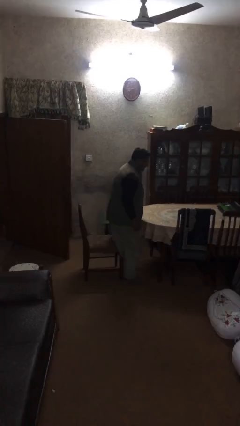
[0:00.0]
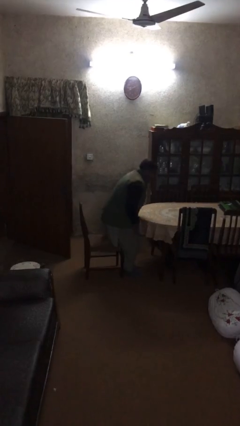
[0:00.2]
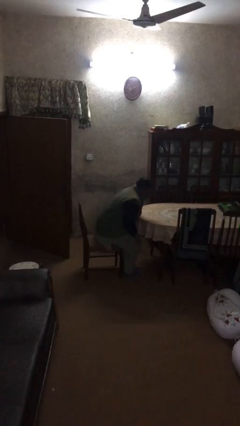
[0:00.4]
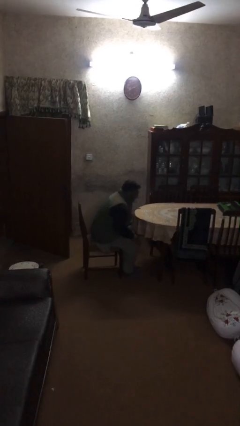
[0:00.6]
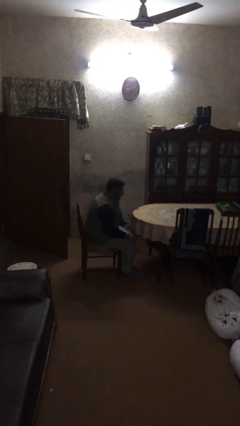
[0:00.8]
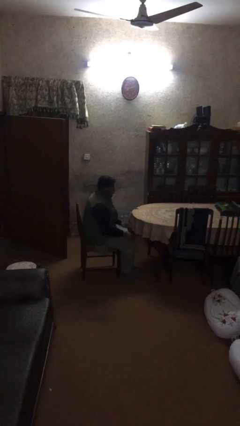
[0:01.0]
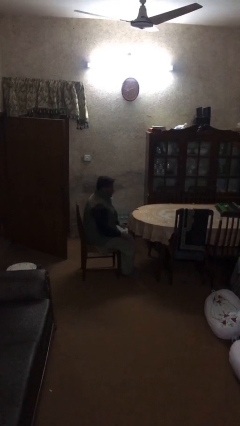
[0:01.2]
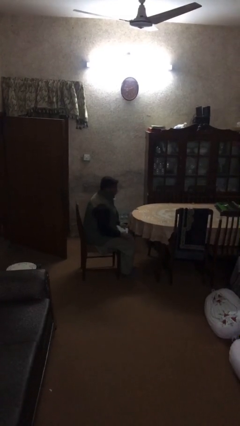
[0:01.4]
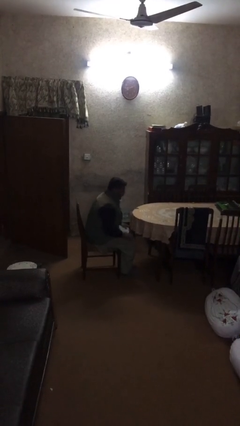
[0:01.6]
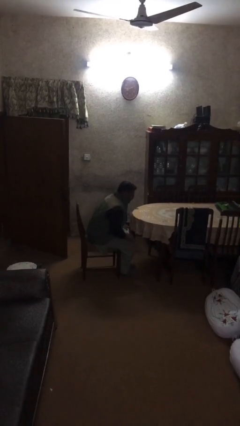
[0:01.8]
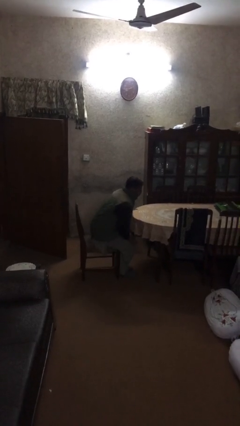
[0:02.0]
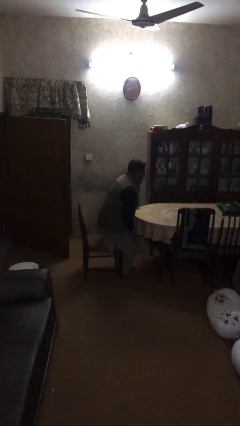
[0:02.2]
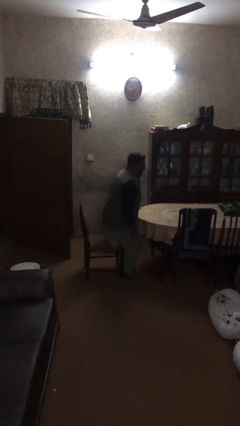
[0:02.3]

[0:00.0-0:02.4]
person sits down

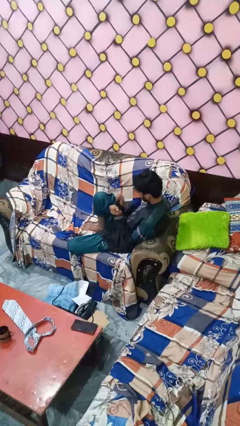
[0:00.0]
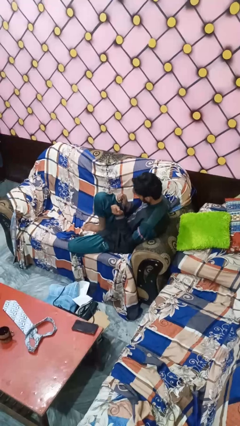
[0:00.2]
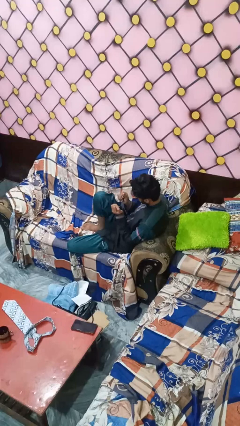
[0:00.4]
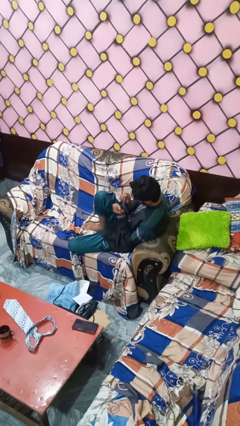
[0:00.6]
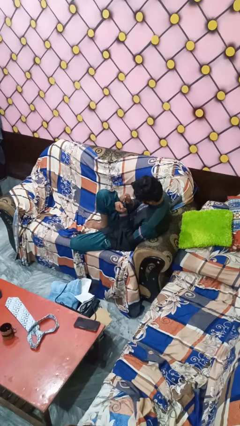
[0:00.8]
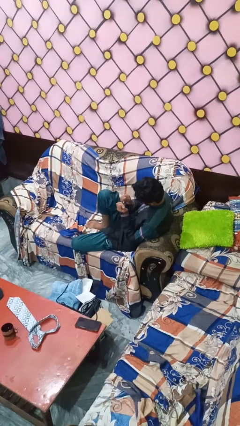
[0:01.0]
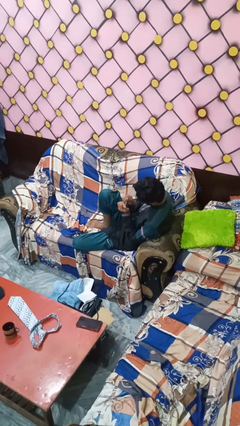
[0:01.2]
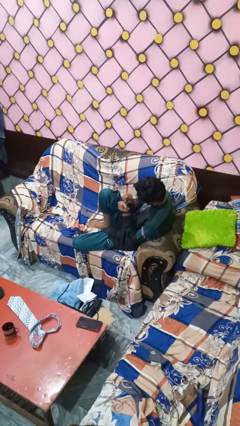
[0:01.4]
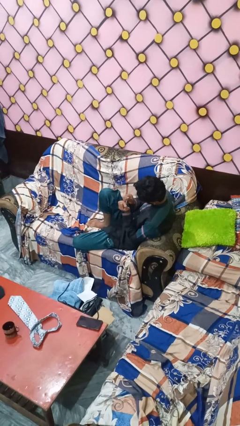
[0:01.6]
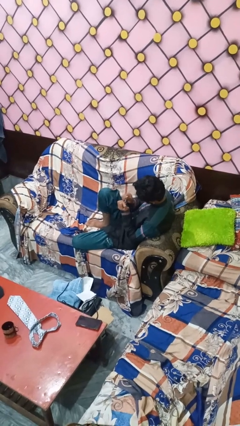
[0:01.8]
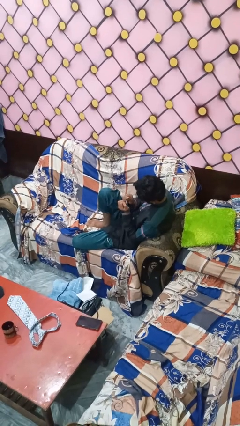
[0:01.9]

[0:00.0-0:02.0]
person paints fingernails

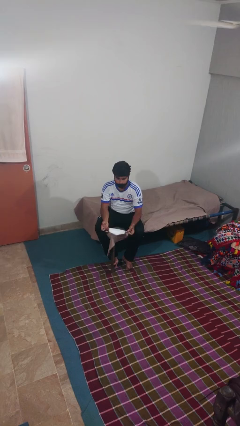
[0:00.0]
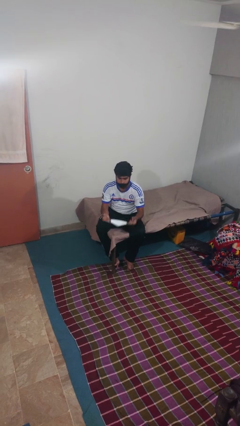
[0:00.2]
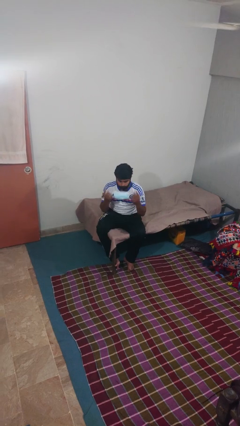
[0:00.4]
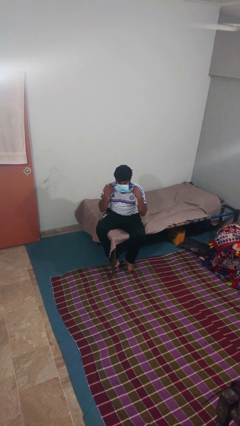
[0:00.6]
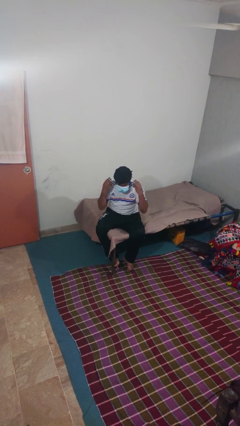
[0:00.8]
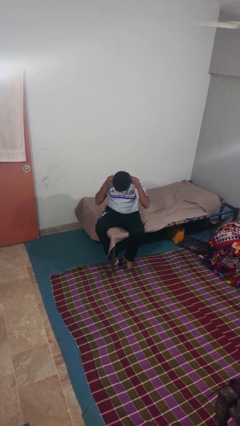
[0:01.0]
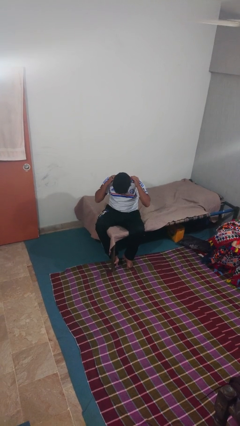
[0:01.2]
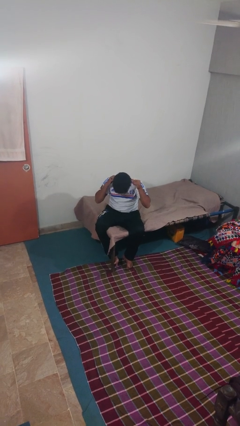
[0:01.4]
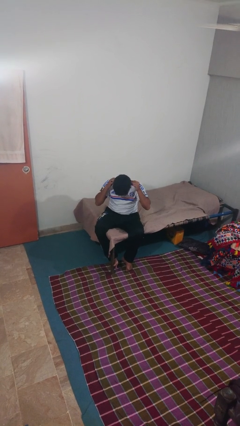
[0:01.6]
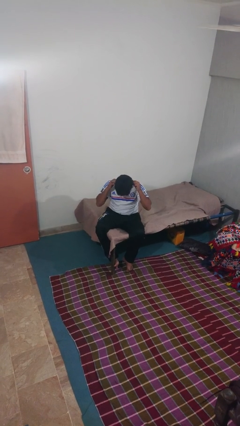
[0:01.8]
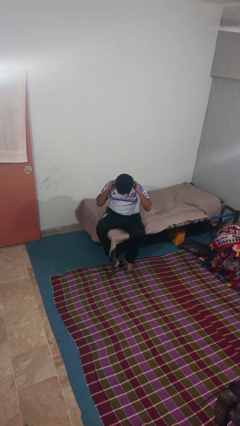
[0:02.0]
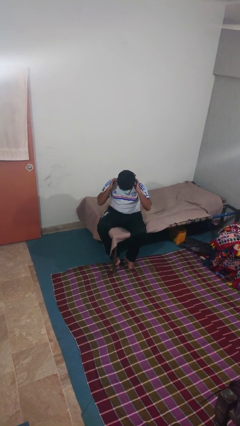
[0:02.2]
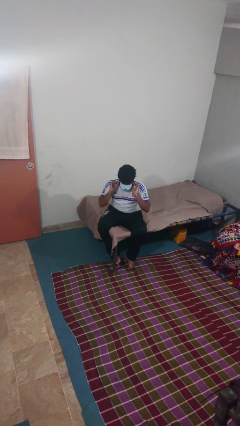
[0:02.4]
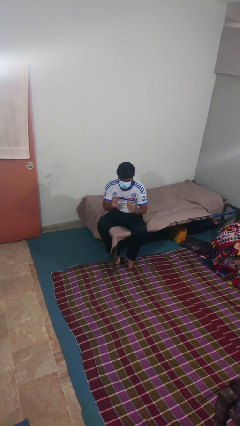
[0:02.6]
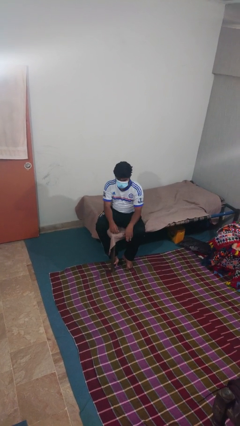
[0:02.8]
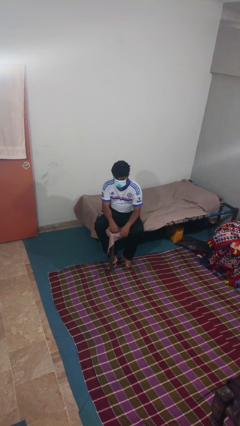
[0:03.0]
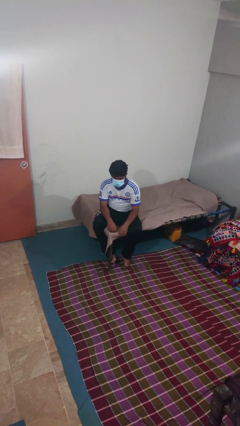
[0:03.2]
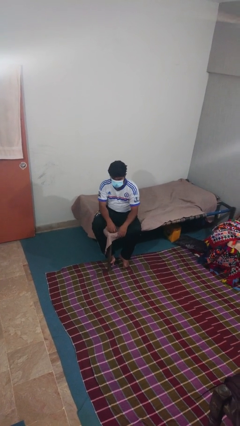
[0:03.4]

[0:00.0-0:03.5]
person puts on facemask

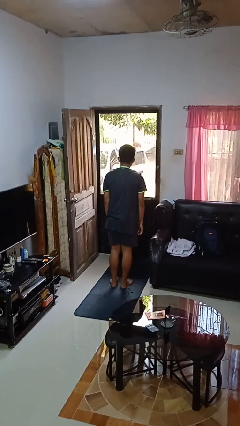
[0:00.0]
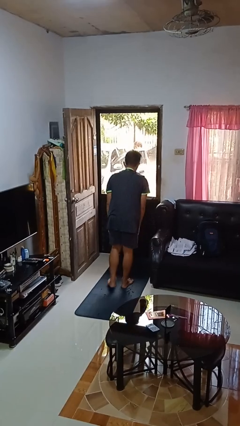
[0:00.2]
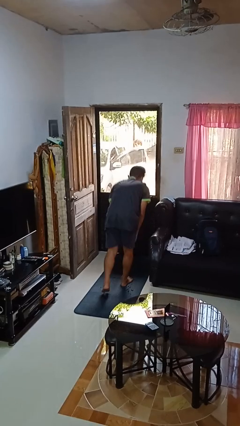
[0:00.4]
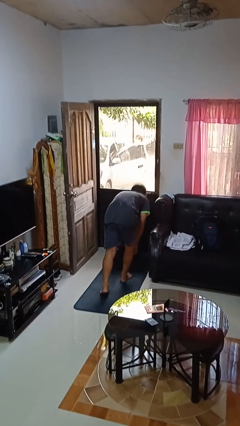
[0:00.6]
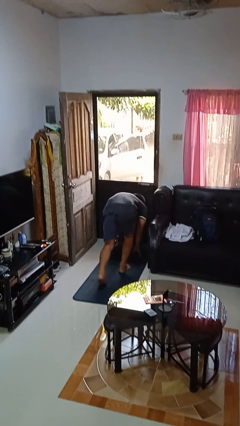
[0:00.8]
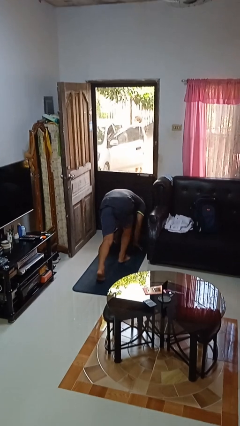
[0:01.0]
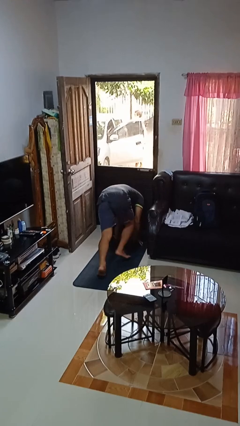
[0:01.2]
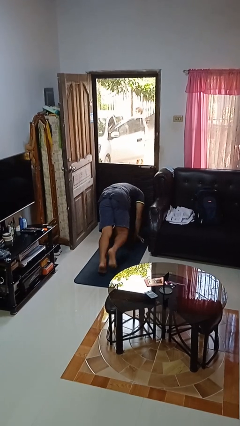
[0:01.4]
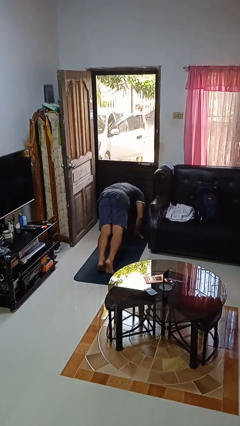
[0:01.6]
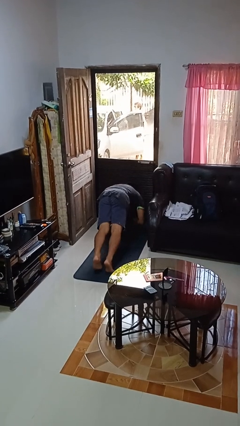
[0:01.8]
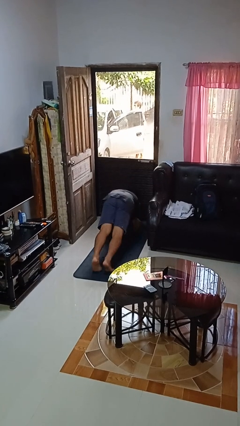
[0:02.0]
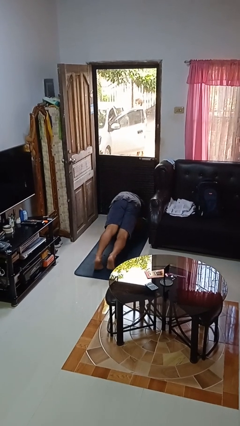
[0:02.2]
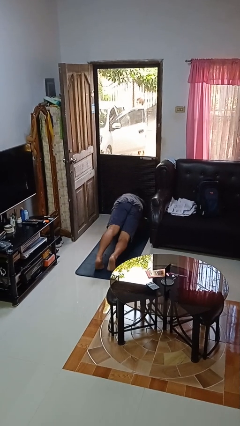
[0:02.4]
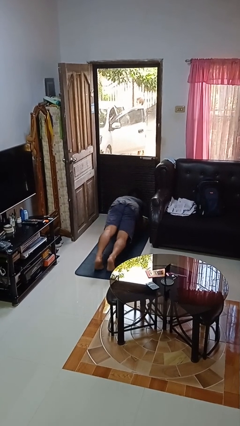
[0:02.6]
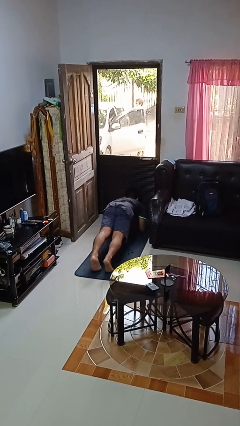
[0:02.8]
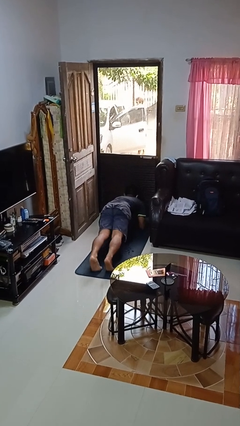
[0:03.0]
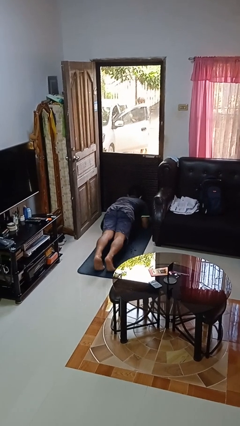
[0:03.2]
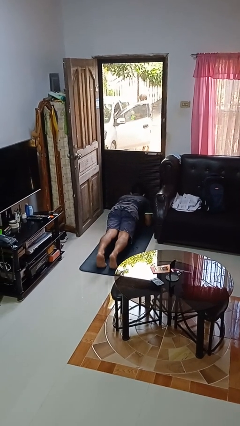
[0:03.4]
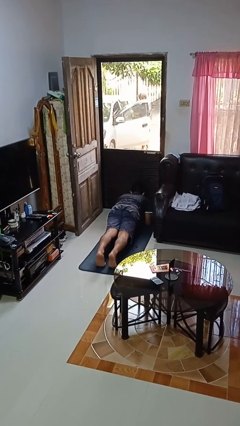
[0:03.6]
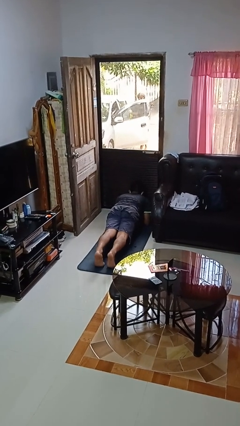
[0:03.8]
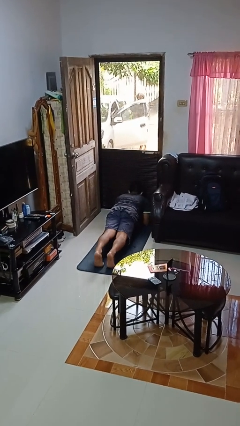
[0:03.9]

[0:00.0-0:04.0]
person exercises with plank

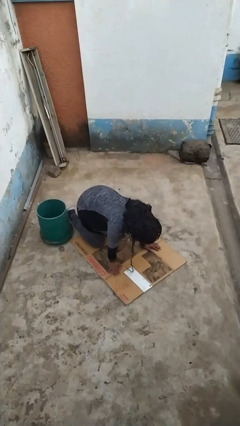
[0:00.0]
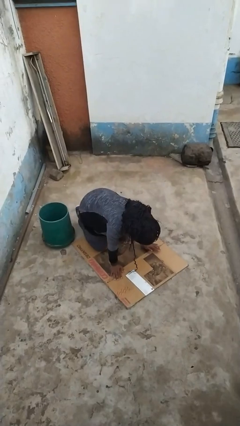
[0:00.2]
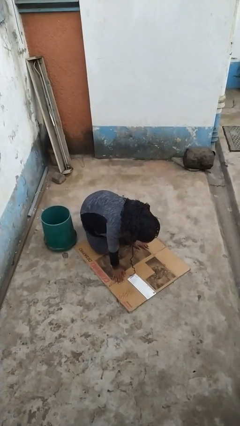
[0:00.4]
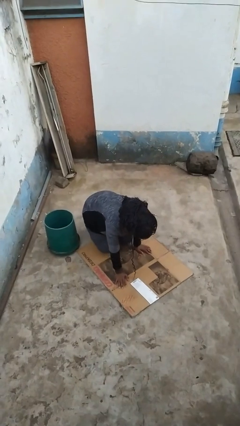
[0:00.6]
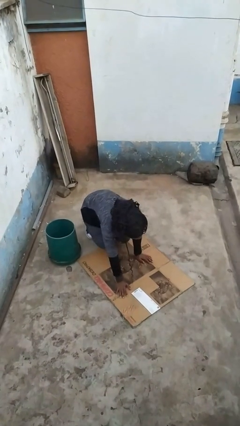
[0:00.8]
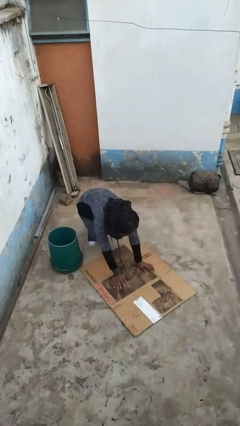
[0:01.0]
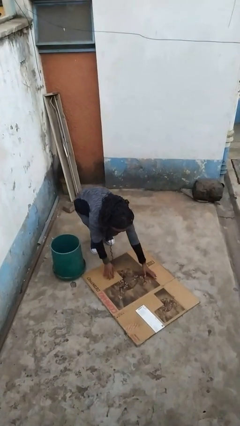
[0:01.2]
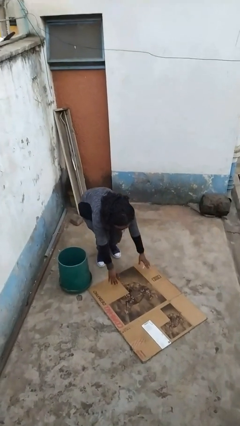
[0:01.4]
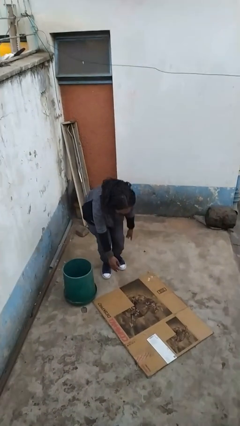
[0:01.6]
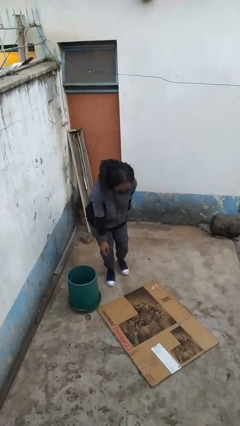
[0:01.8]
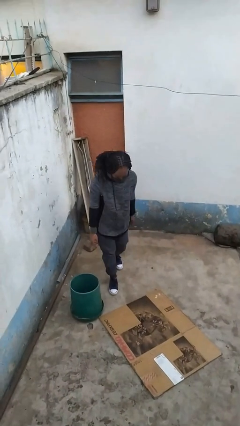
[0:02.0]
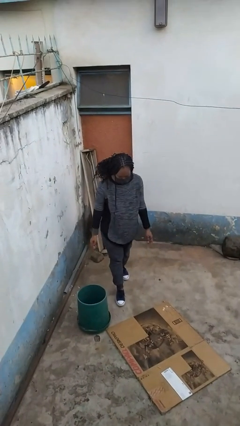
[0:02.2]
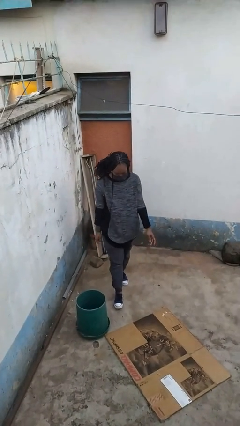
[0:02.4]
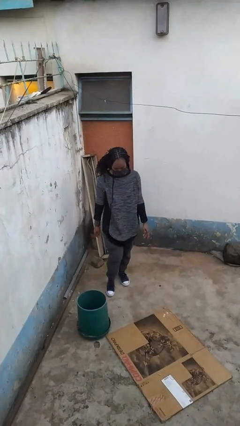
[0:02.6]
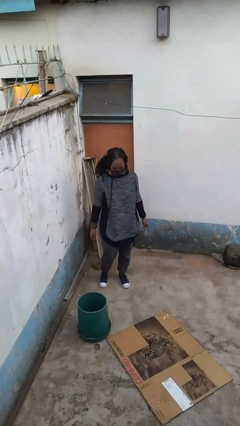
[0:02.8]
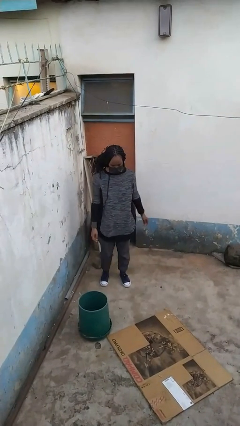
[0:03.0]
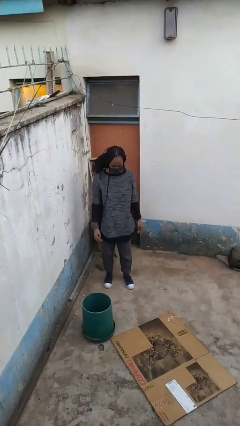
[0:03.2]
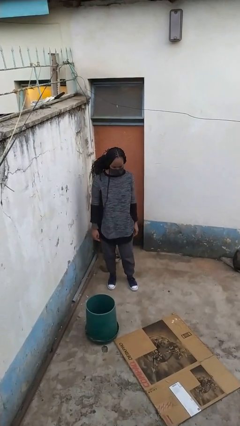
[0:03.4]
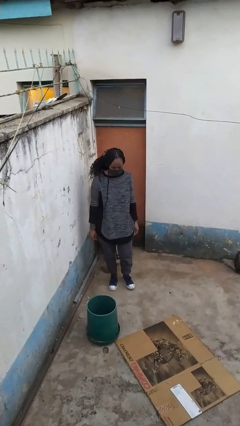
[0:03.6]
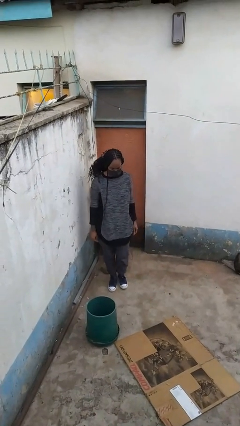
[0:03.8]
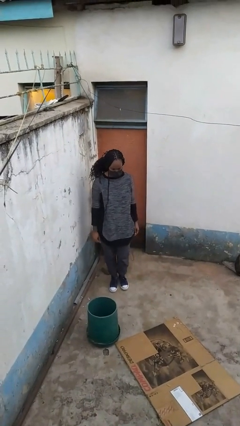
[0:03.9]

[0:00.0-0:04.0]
person stands up from floor

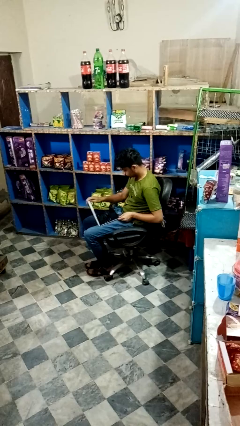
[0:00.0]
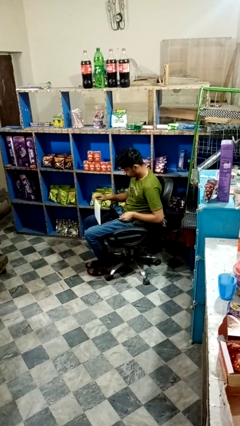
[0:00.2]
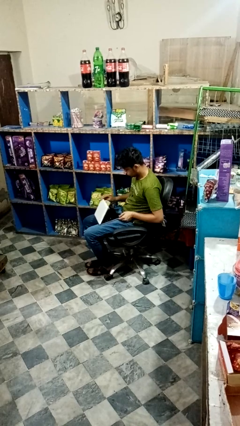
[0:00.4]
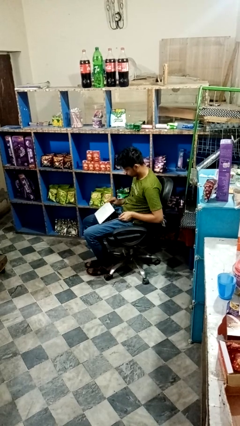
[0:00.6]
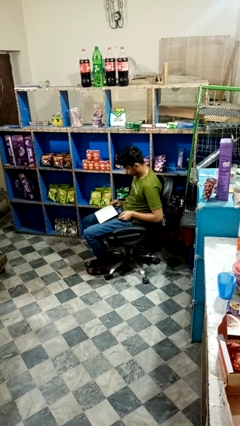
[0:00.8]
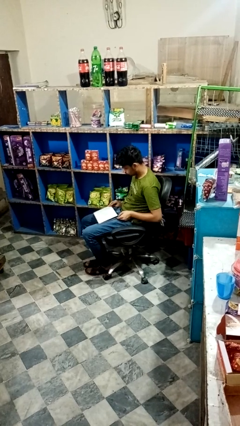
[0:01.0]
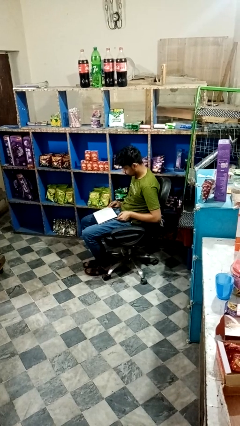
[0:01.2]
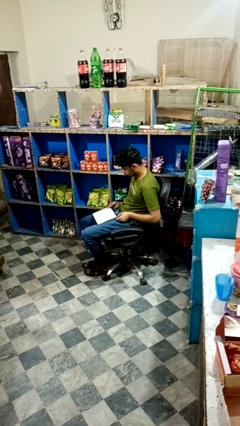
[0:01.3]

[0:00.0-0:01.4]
person closes laptop
